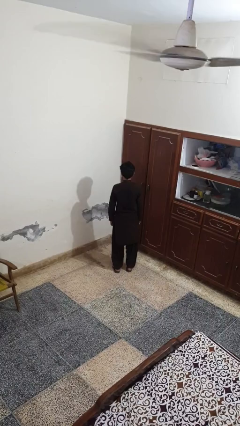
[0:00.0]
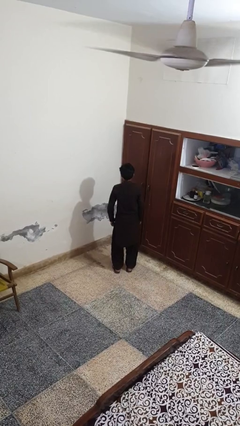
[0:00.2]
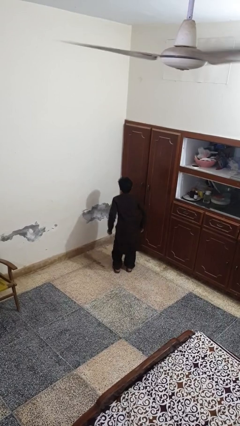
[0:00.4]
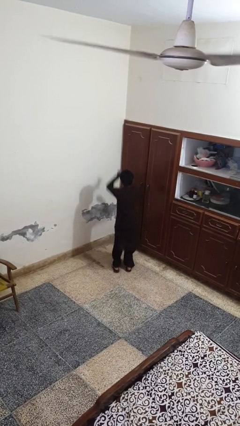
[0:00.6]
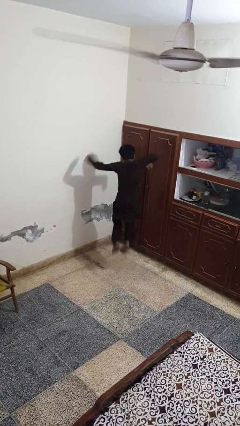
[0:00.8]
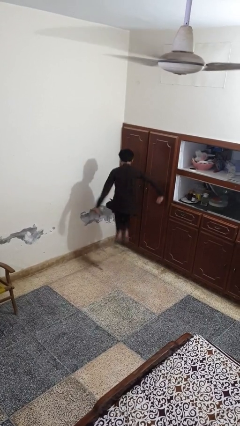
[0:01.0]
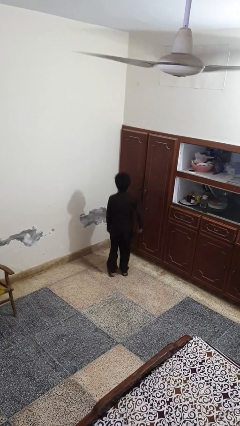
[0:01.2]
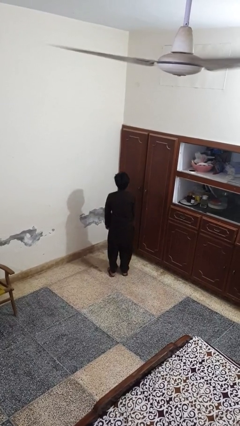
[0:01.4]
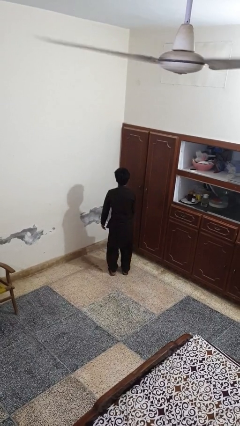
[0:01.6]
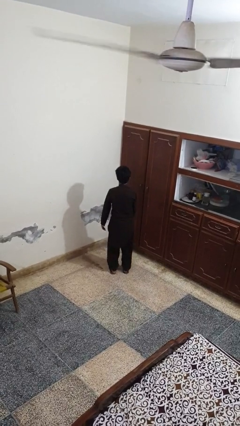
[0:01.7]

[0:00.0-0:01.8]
person jumps

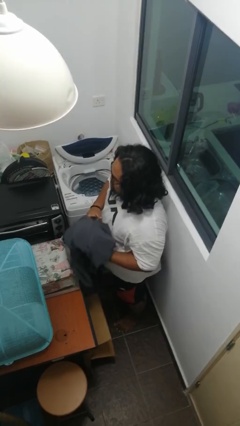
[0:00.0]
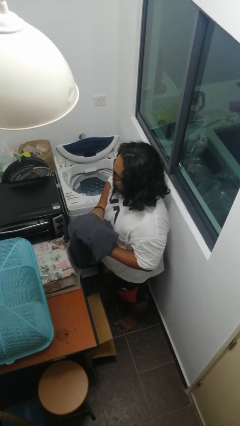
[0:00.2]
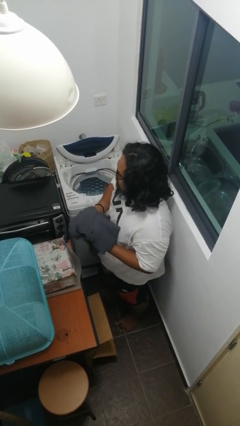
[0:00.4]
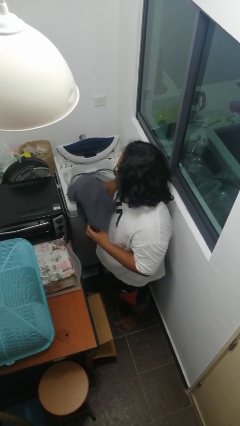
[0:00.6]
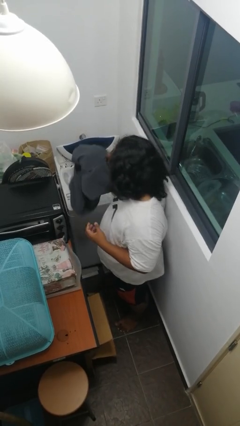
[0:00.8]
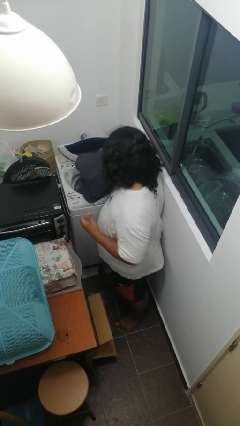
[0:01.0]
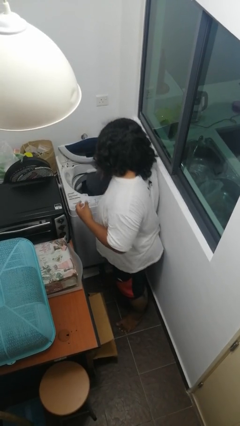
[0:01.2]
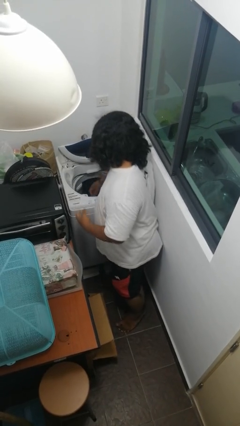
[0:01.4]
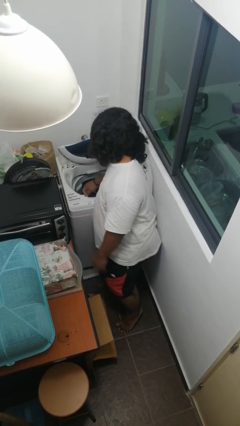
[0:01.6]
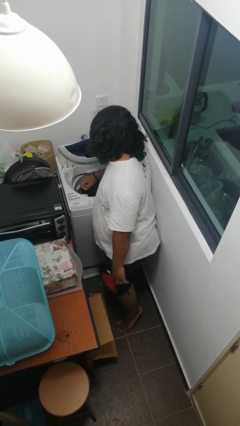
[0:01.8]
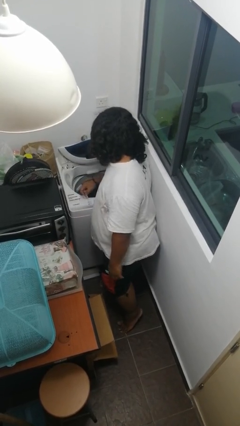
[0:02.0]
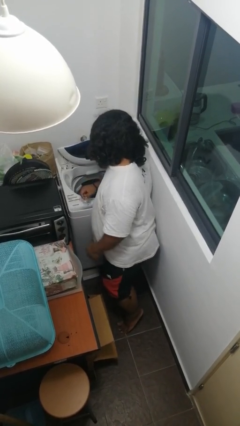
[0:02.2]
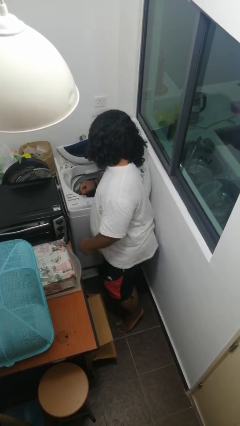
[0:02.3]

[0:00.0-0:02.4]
person loads clotheswasher

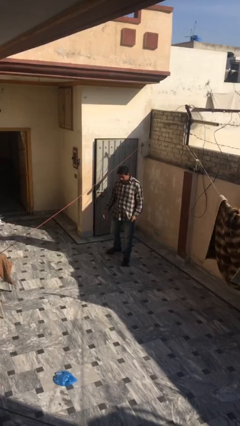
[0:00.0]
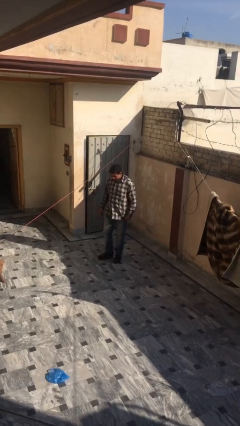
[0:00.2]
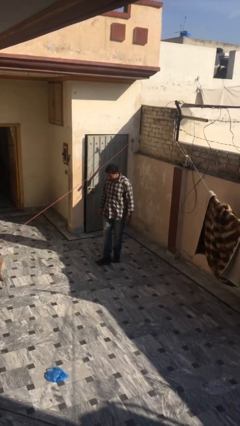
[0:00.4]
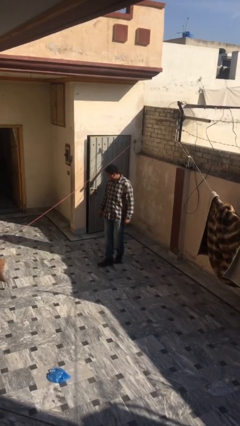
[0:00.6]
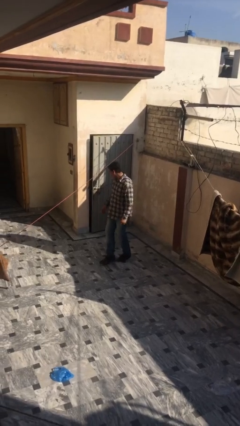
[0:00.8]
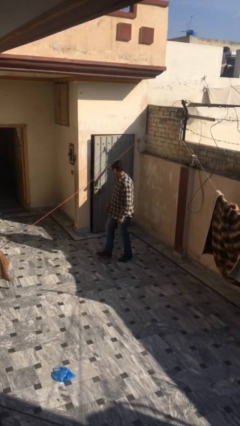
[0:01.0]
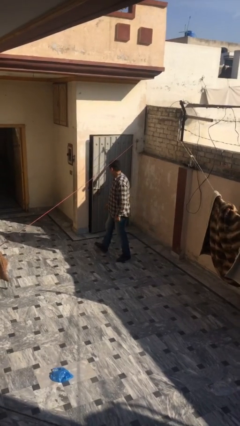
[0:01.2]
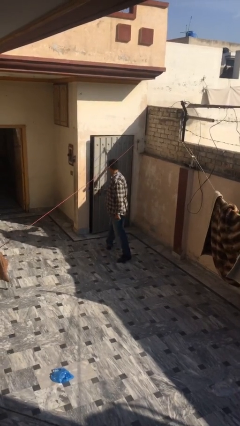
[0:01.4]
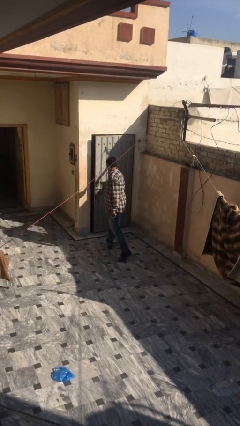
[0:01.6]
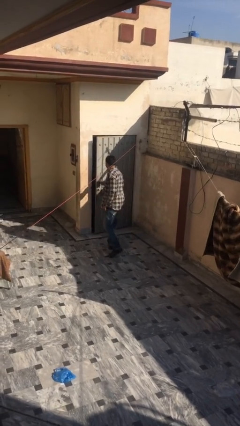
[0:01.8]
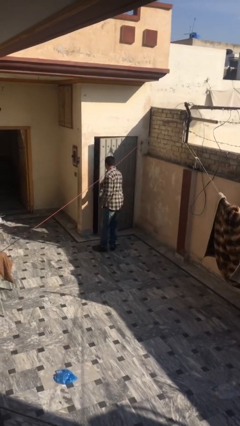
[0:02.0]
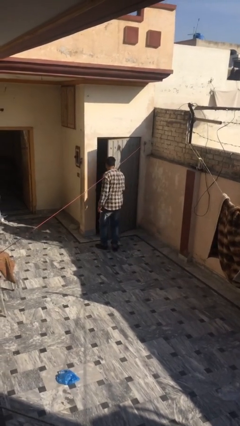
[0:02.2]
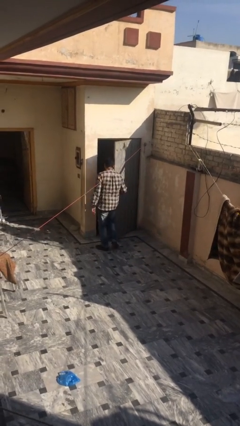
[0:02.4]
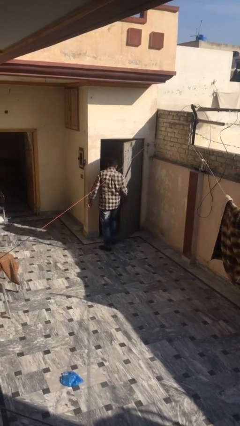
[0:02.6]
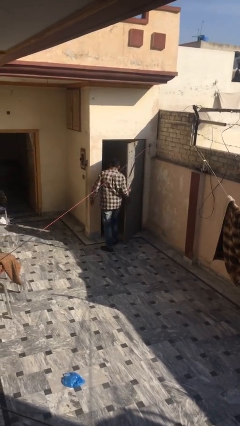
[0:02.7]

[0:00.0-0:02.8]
person opens facility door

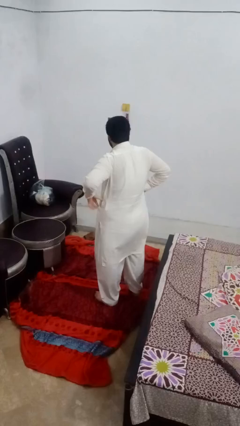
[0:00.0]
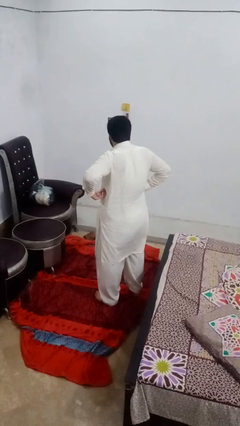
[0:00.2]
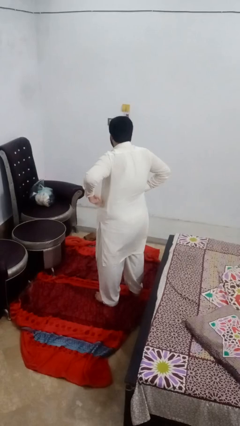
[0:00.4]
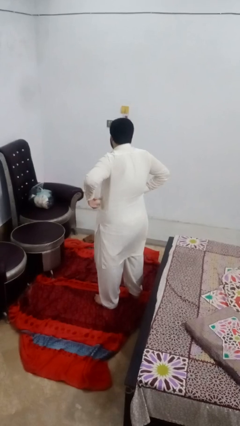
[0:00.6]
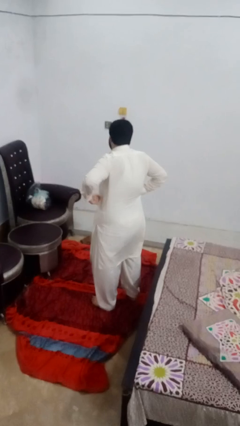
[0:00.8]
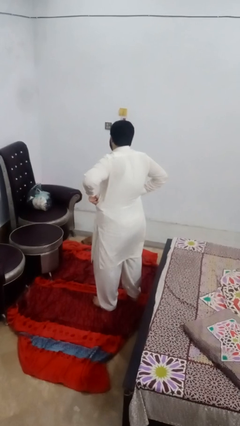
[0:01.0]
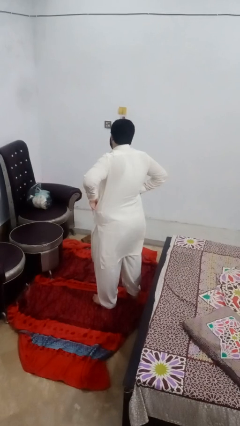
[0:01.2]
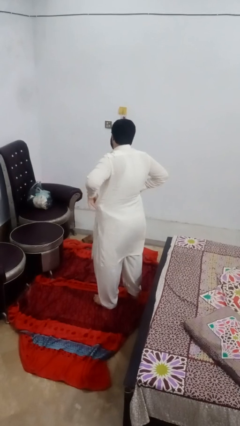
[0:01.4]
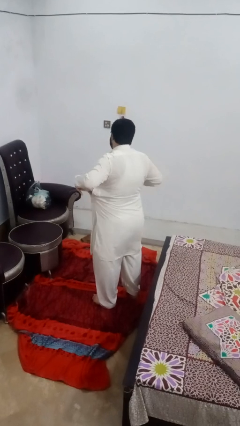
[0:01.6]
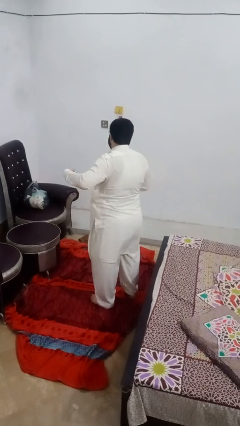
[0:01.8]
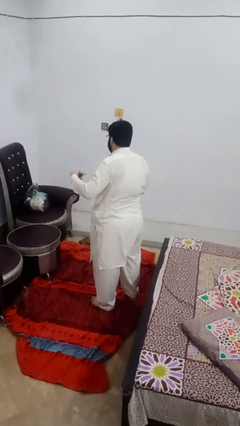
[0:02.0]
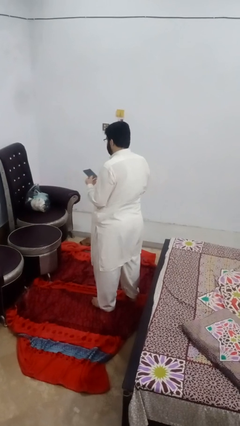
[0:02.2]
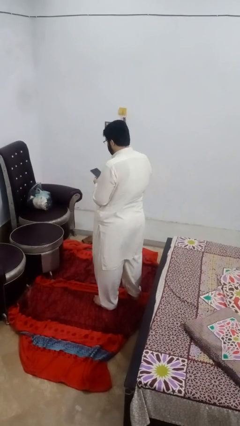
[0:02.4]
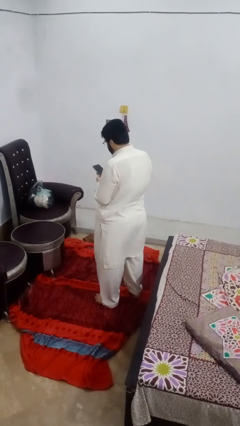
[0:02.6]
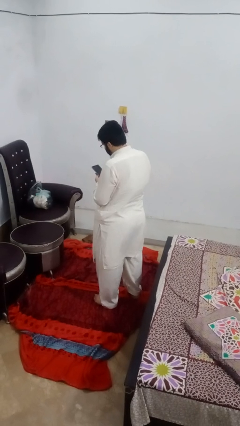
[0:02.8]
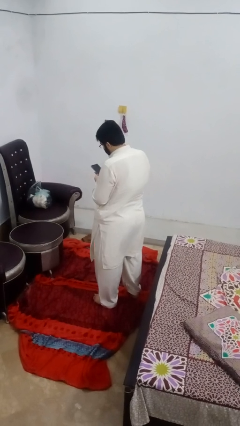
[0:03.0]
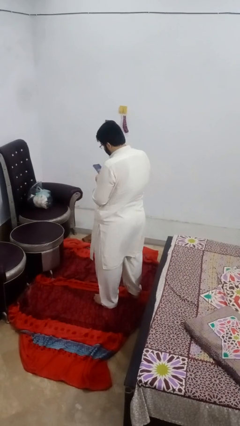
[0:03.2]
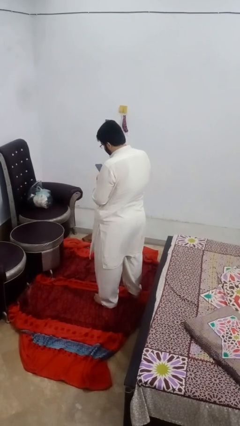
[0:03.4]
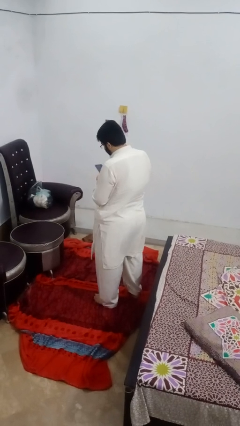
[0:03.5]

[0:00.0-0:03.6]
person takes phone from pocket

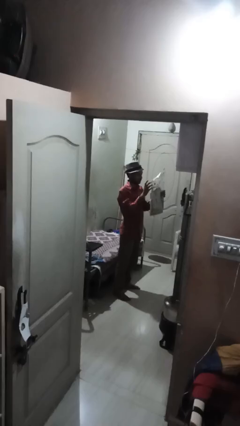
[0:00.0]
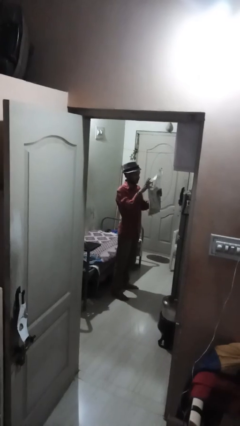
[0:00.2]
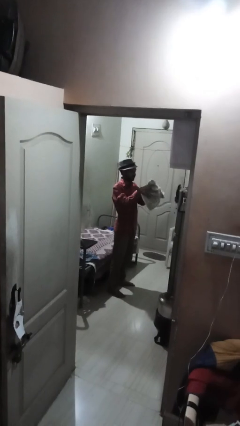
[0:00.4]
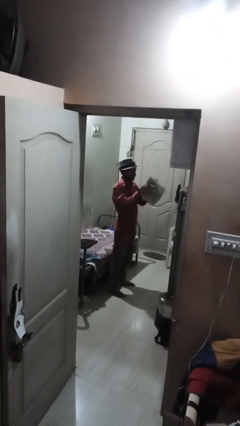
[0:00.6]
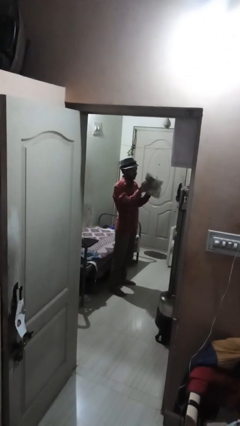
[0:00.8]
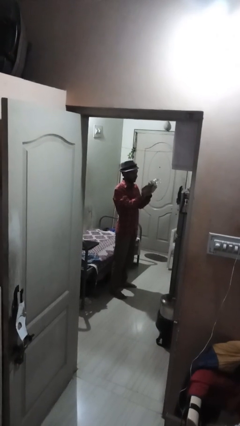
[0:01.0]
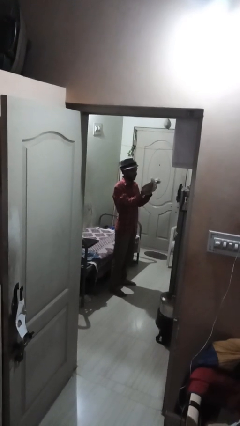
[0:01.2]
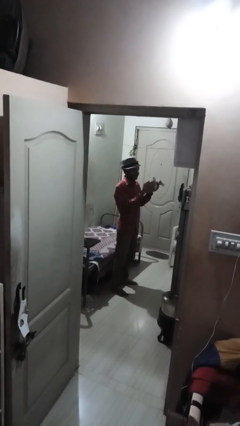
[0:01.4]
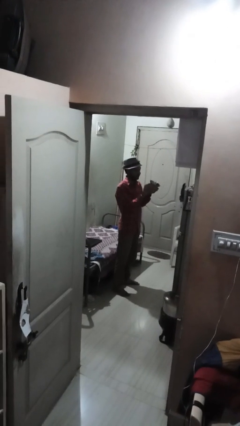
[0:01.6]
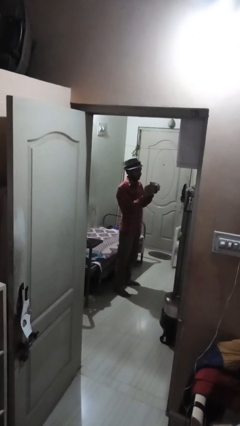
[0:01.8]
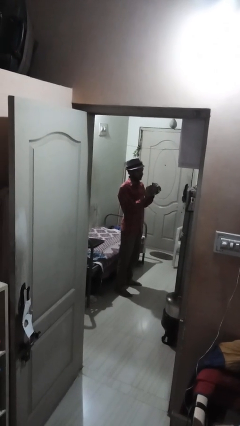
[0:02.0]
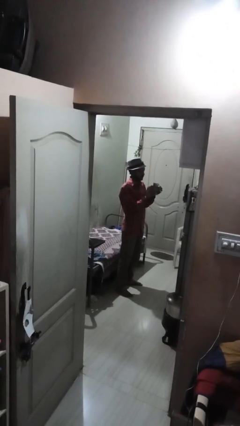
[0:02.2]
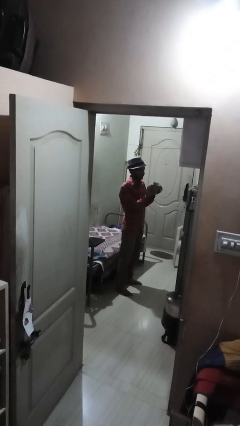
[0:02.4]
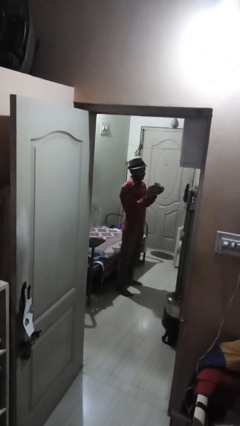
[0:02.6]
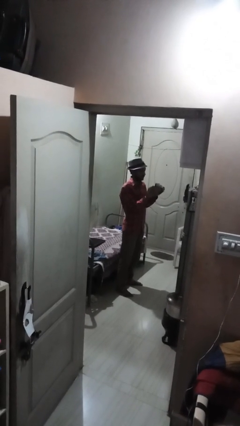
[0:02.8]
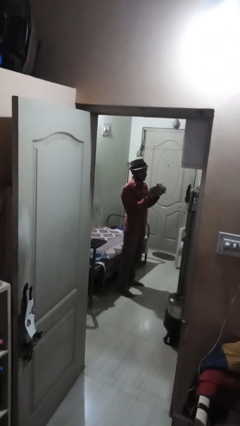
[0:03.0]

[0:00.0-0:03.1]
person crumples paper

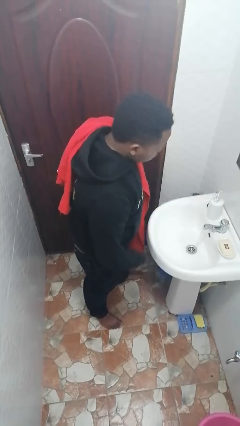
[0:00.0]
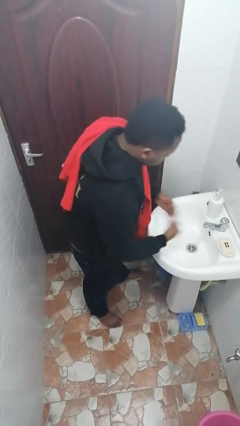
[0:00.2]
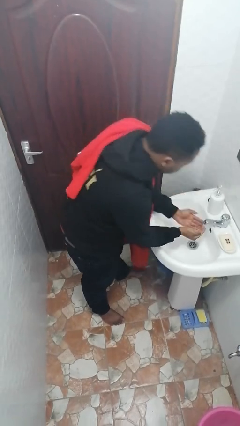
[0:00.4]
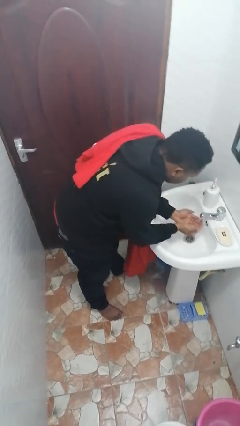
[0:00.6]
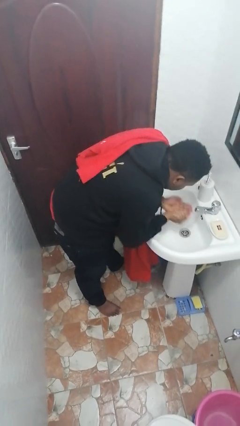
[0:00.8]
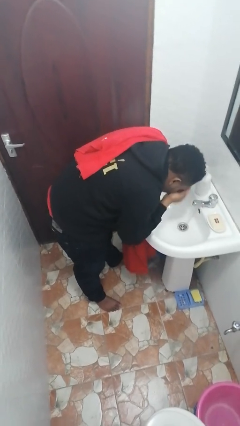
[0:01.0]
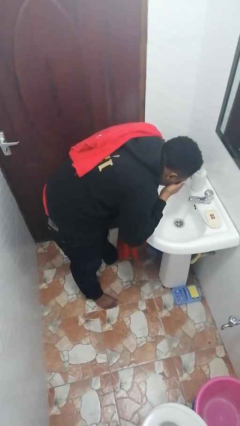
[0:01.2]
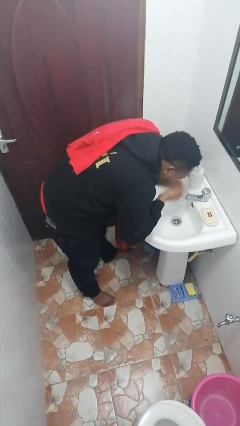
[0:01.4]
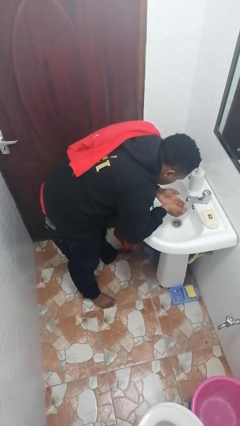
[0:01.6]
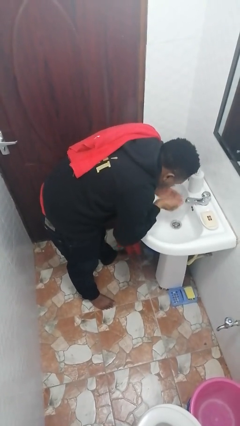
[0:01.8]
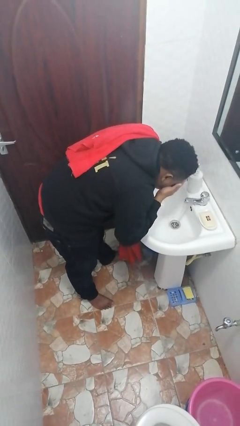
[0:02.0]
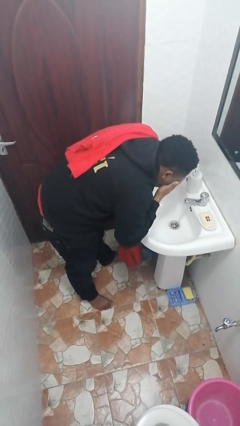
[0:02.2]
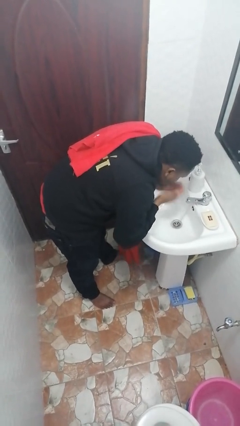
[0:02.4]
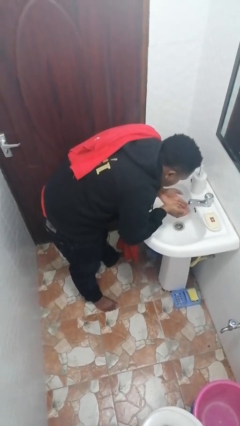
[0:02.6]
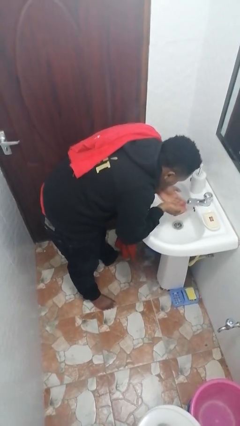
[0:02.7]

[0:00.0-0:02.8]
person washes face

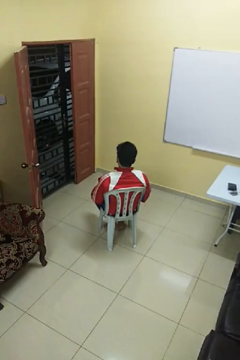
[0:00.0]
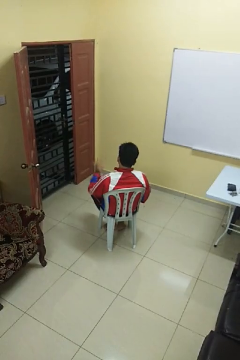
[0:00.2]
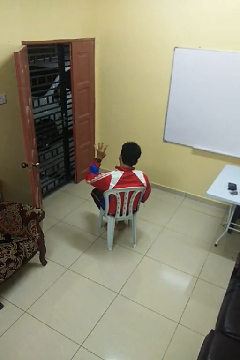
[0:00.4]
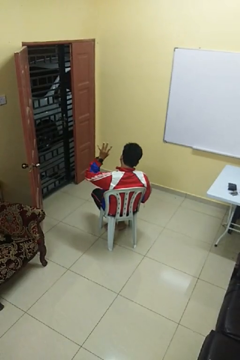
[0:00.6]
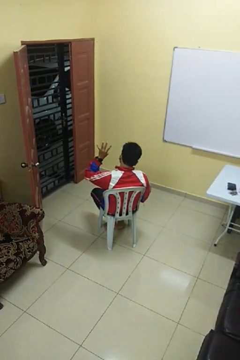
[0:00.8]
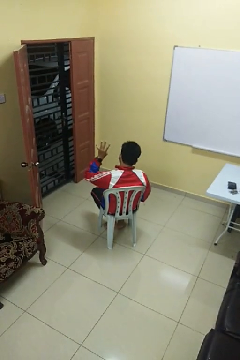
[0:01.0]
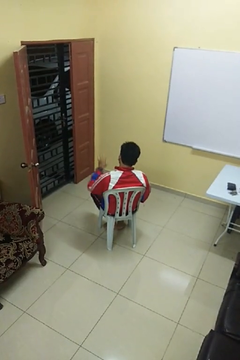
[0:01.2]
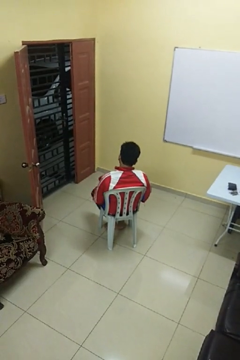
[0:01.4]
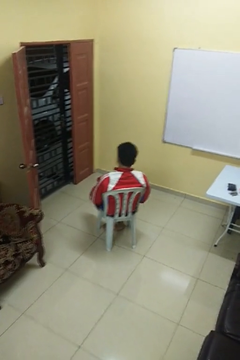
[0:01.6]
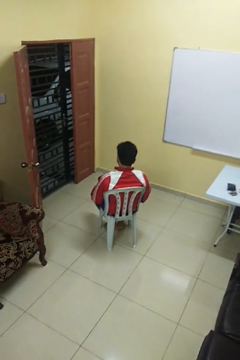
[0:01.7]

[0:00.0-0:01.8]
person gestures number four
